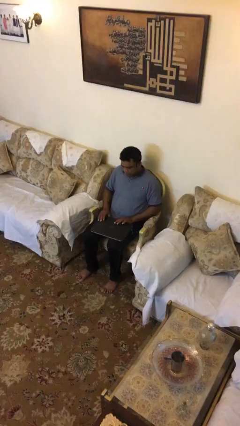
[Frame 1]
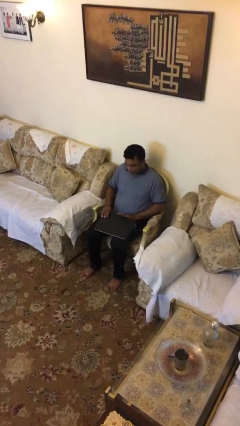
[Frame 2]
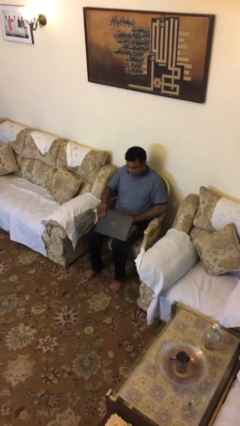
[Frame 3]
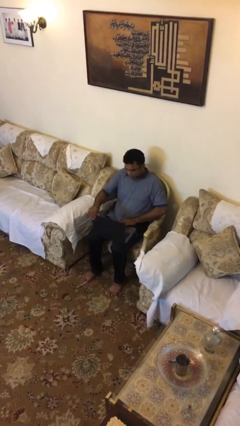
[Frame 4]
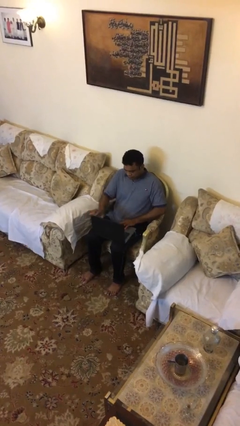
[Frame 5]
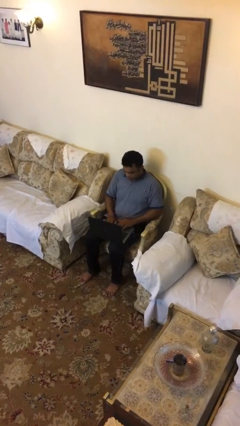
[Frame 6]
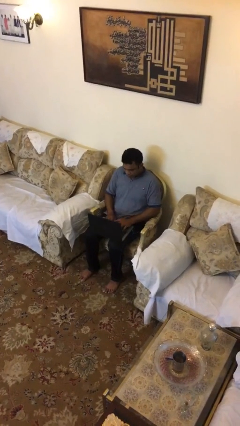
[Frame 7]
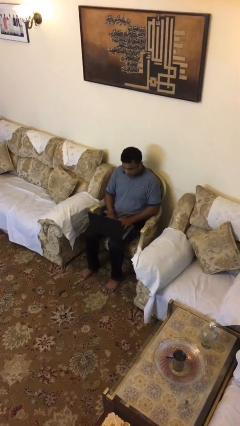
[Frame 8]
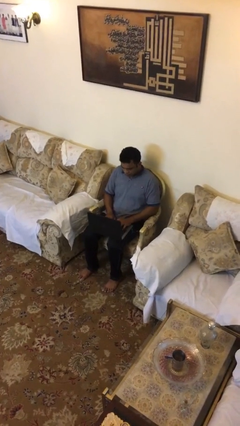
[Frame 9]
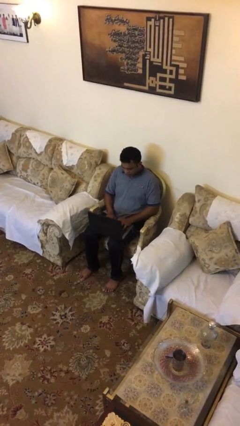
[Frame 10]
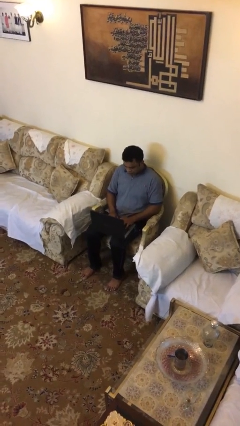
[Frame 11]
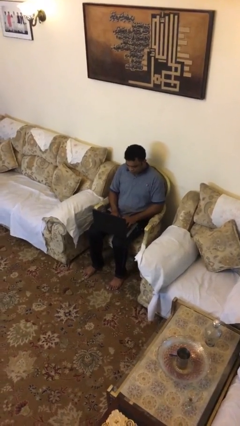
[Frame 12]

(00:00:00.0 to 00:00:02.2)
person interacts with laptop

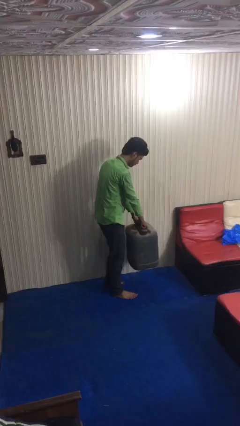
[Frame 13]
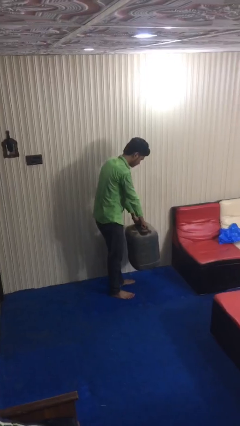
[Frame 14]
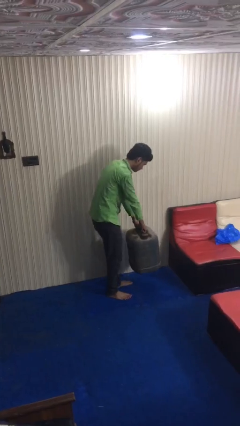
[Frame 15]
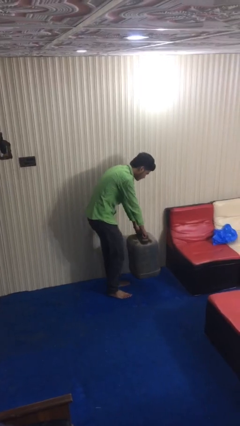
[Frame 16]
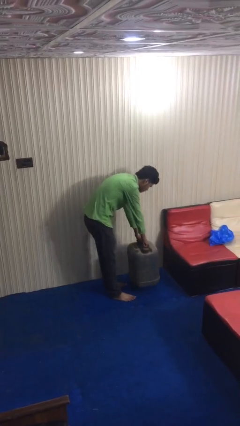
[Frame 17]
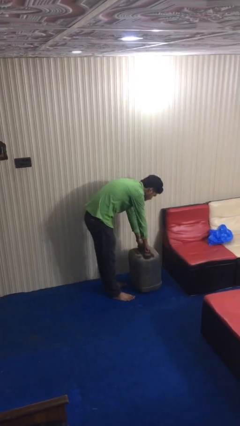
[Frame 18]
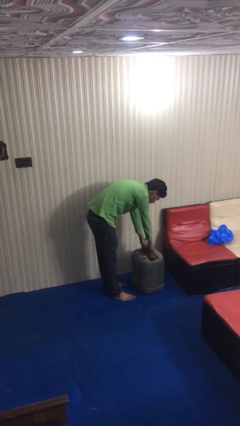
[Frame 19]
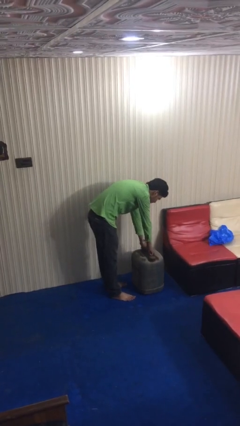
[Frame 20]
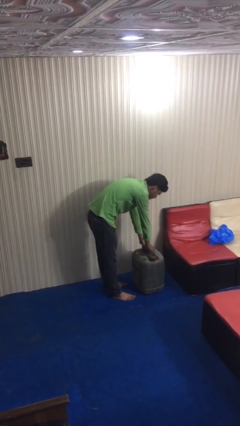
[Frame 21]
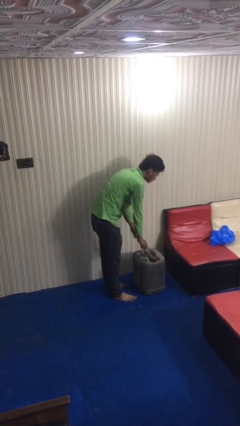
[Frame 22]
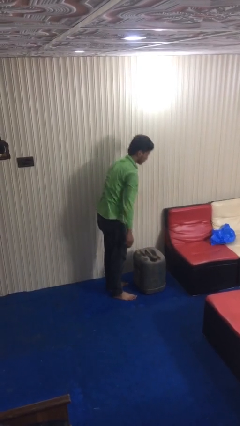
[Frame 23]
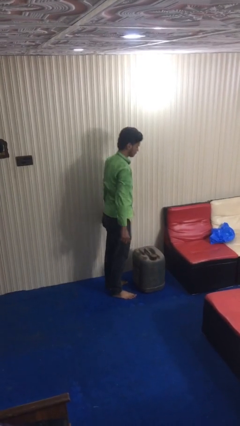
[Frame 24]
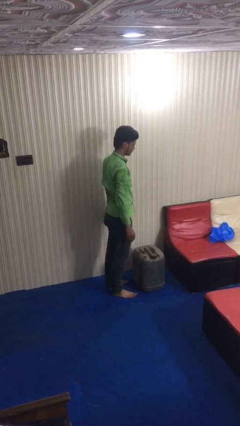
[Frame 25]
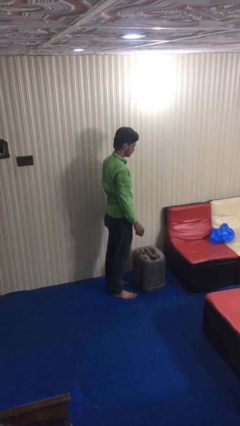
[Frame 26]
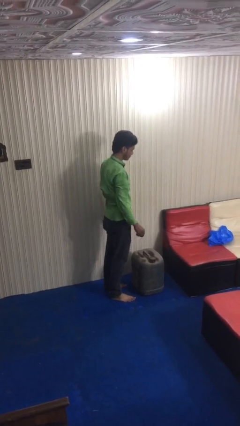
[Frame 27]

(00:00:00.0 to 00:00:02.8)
person puts down object on floor

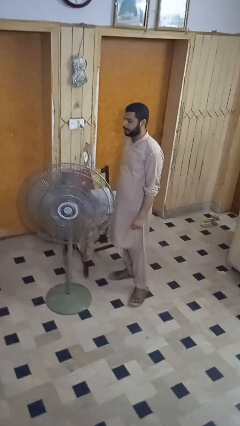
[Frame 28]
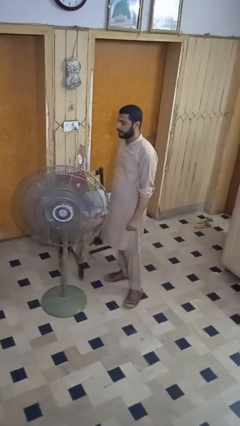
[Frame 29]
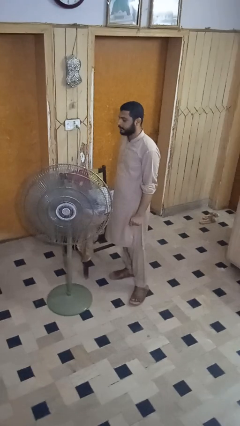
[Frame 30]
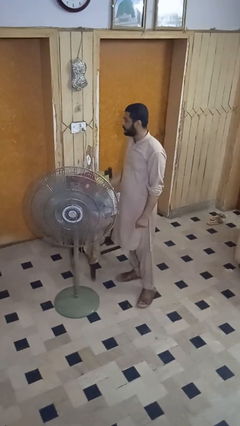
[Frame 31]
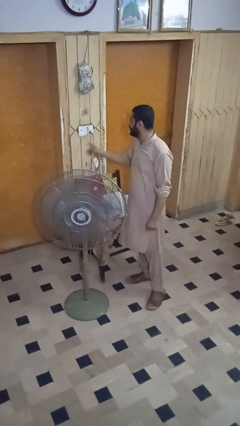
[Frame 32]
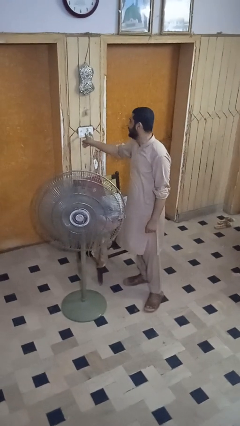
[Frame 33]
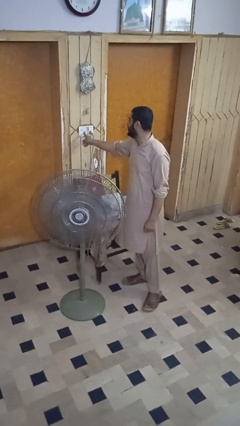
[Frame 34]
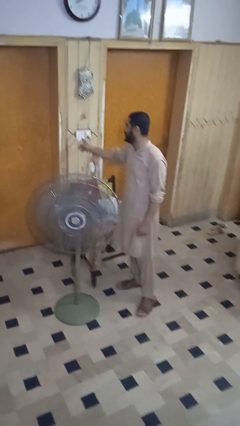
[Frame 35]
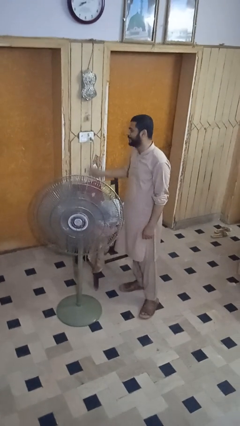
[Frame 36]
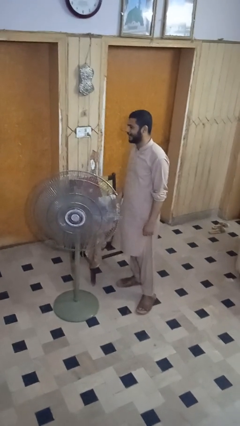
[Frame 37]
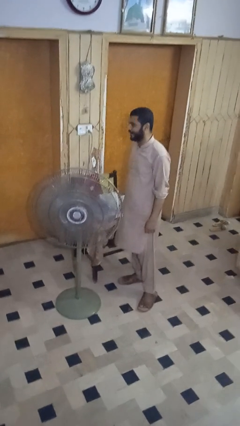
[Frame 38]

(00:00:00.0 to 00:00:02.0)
person turns off fan

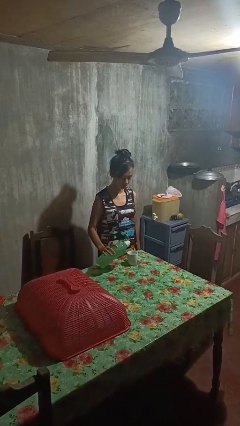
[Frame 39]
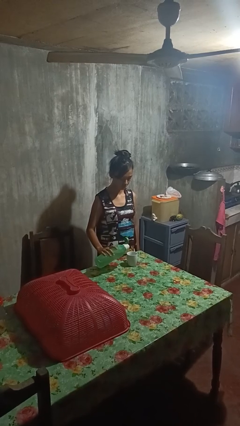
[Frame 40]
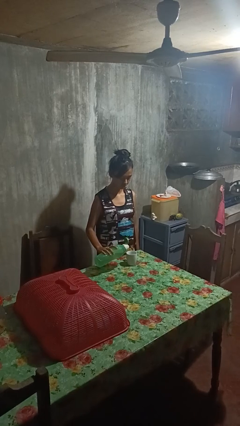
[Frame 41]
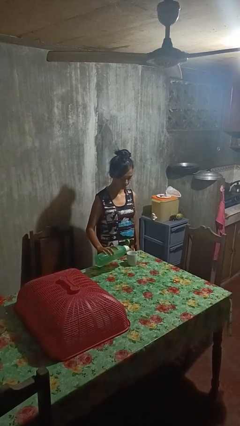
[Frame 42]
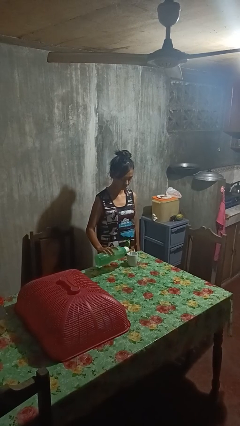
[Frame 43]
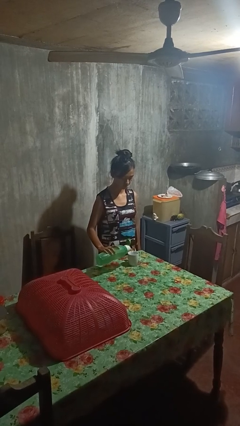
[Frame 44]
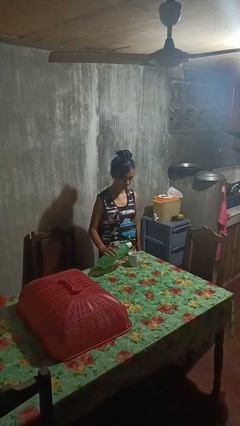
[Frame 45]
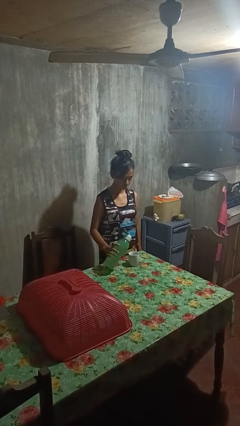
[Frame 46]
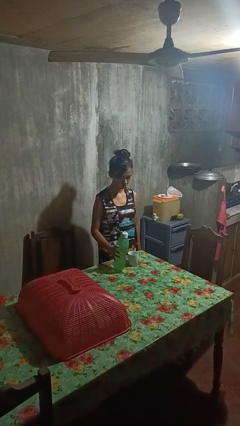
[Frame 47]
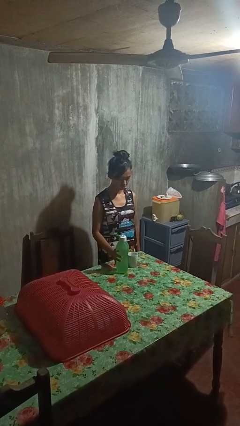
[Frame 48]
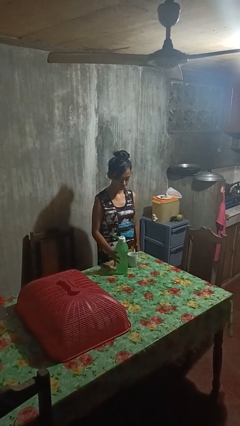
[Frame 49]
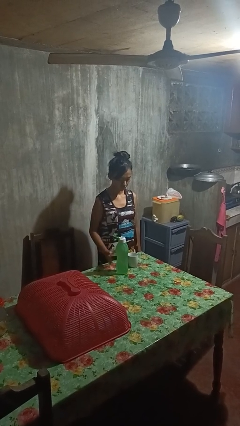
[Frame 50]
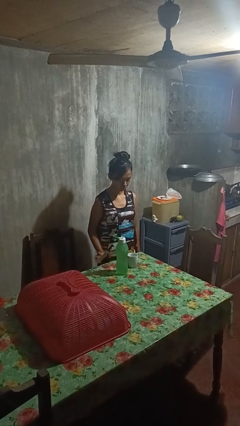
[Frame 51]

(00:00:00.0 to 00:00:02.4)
person pours liquid into cup

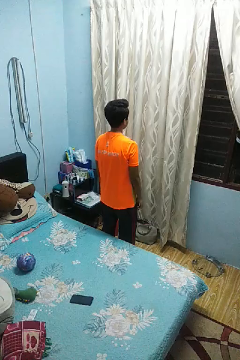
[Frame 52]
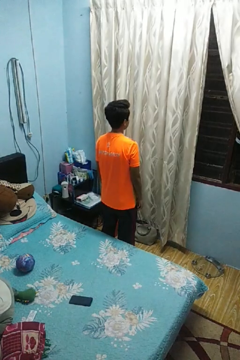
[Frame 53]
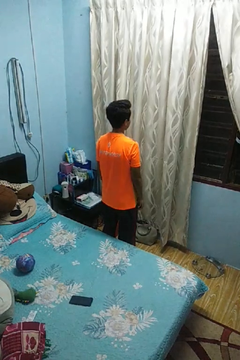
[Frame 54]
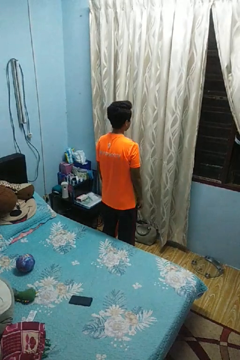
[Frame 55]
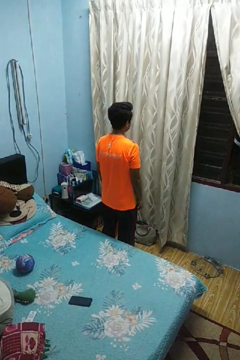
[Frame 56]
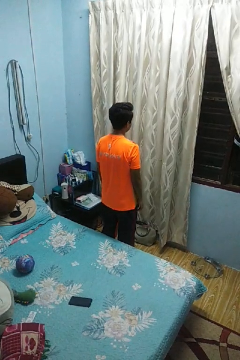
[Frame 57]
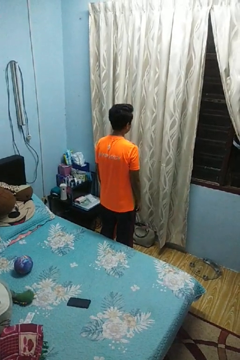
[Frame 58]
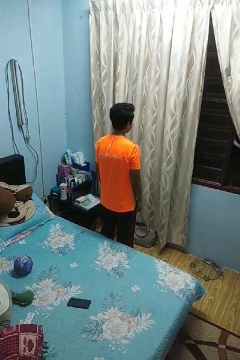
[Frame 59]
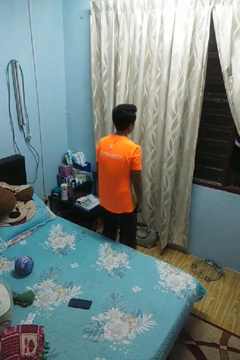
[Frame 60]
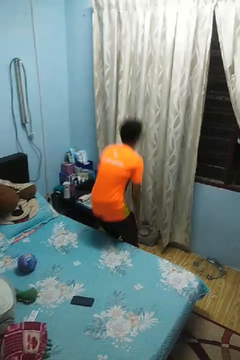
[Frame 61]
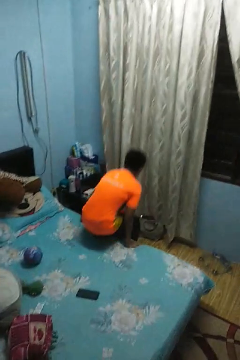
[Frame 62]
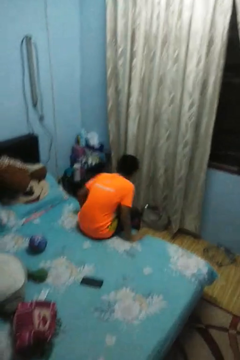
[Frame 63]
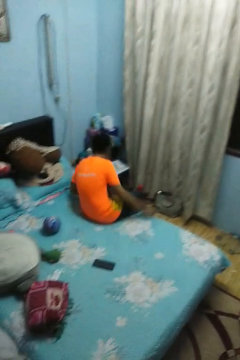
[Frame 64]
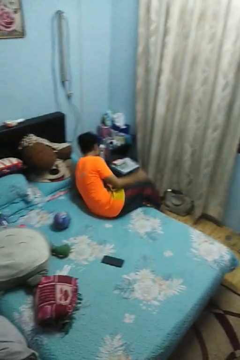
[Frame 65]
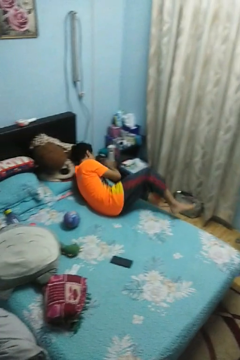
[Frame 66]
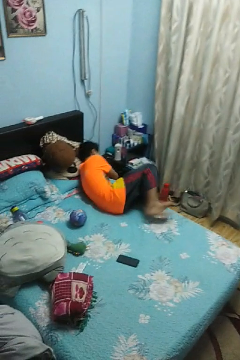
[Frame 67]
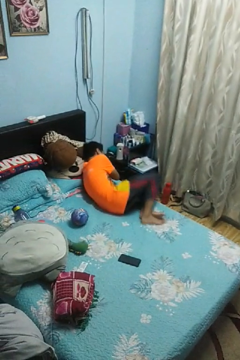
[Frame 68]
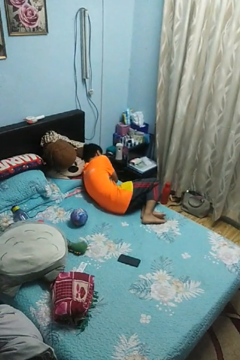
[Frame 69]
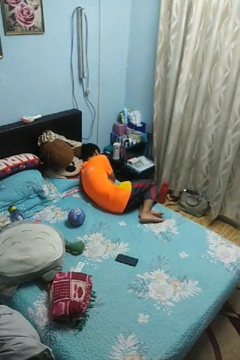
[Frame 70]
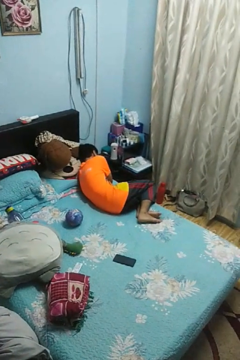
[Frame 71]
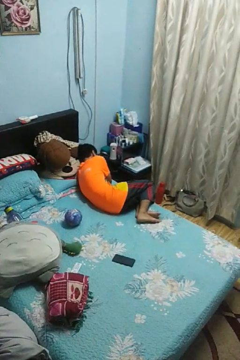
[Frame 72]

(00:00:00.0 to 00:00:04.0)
person lies down on bed

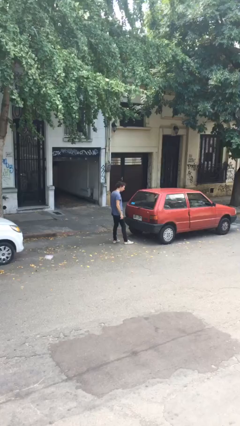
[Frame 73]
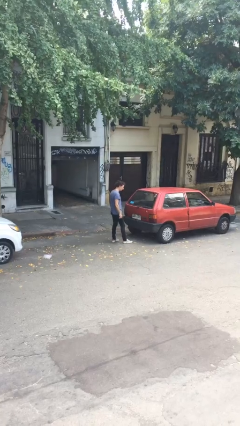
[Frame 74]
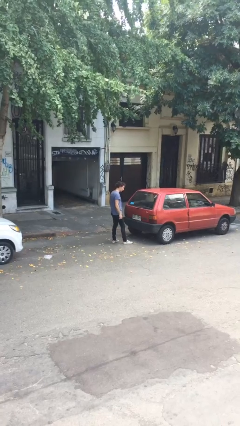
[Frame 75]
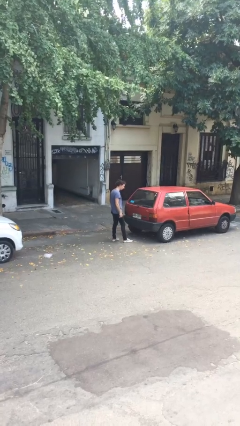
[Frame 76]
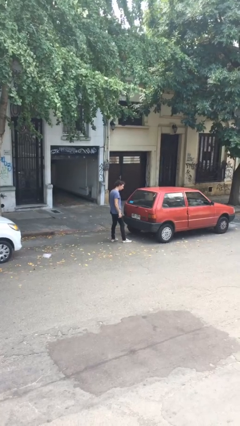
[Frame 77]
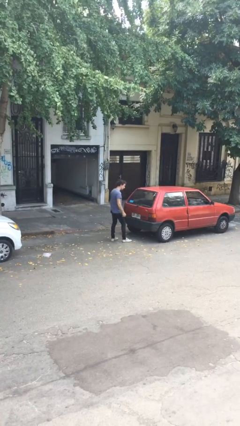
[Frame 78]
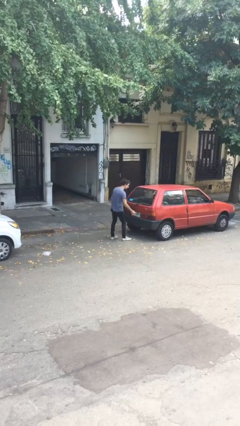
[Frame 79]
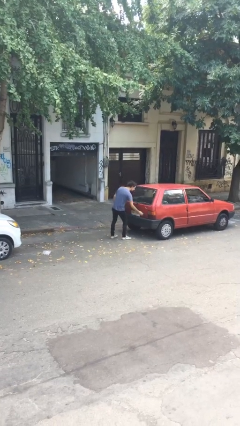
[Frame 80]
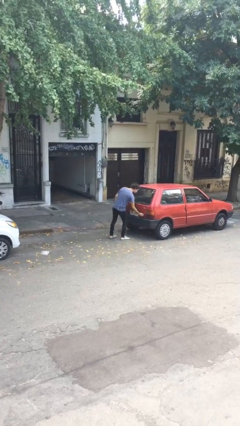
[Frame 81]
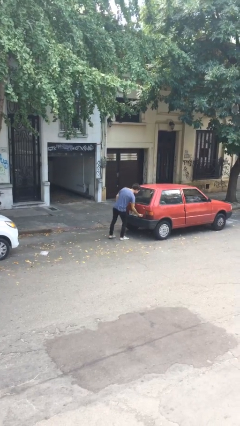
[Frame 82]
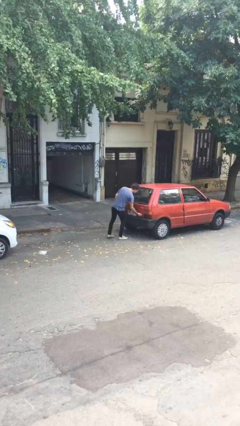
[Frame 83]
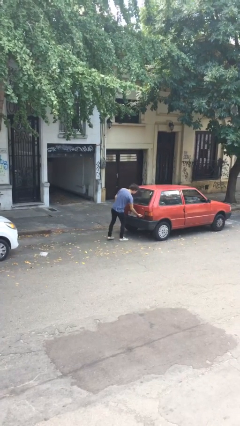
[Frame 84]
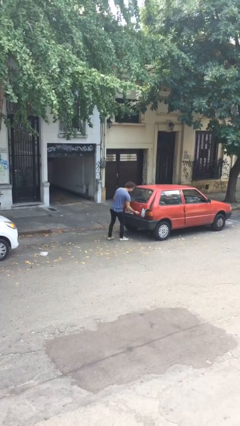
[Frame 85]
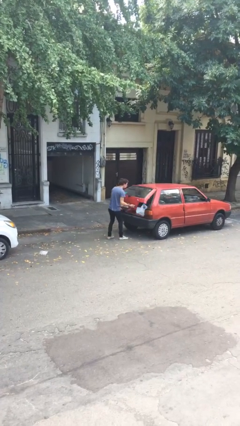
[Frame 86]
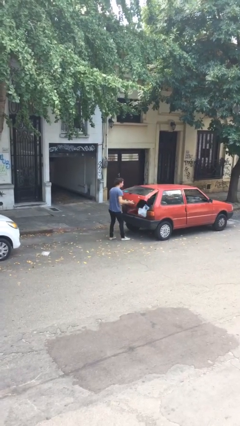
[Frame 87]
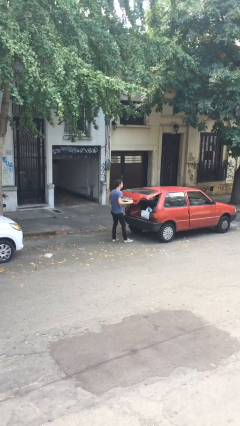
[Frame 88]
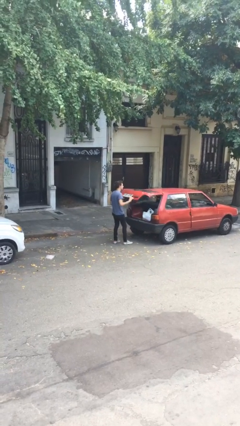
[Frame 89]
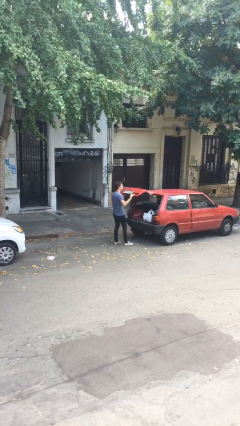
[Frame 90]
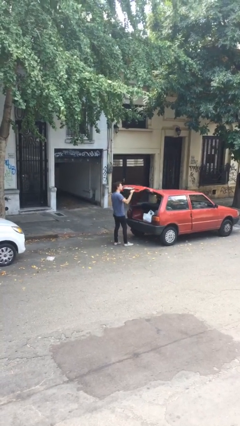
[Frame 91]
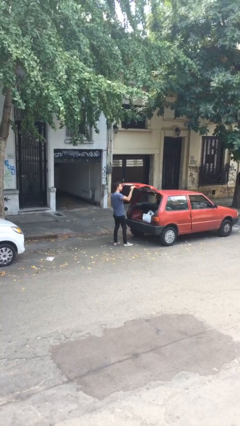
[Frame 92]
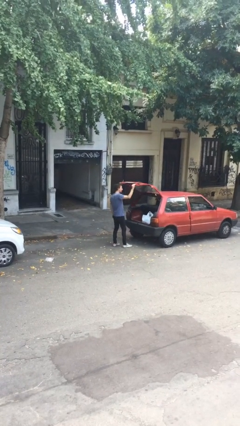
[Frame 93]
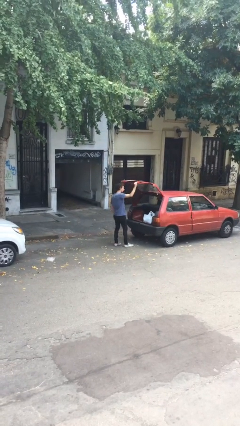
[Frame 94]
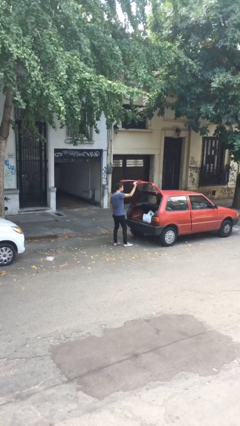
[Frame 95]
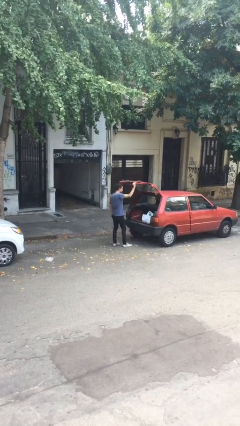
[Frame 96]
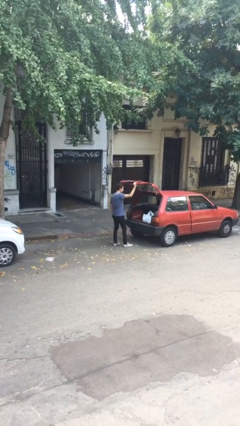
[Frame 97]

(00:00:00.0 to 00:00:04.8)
person opens car trunk
